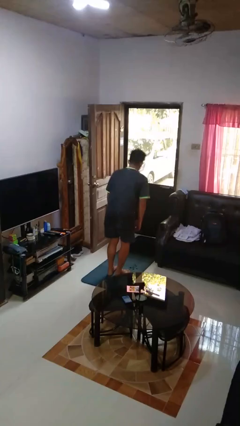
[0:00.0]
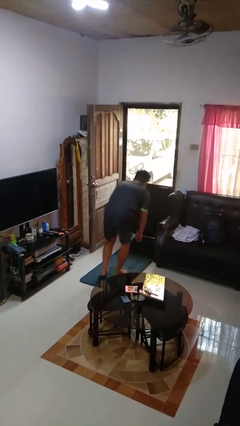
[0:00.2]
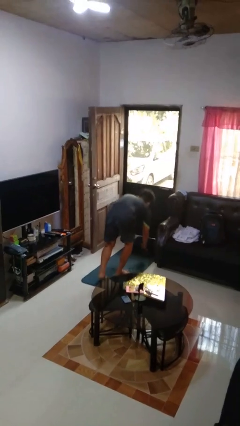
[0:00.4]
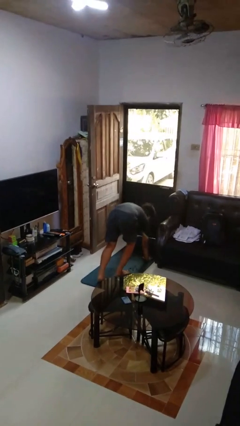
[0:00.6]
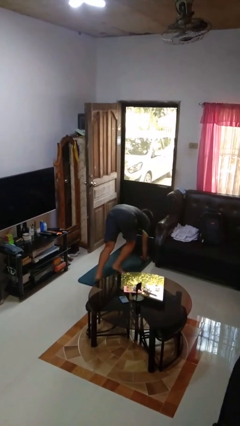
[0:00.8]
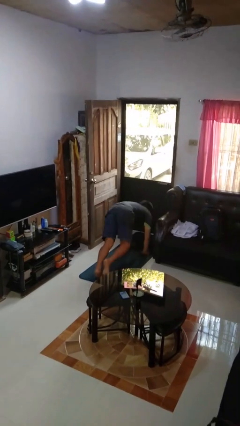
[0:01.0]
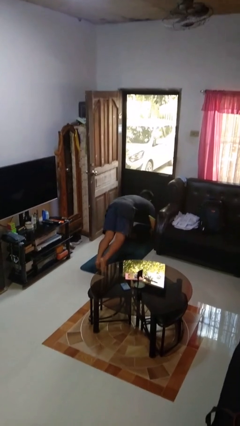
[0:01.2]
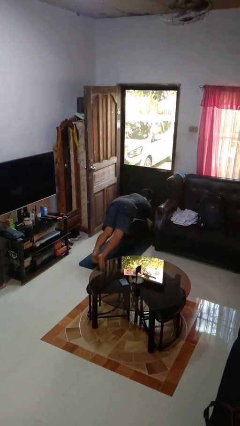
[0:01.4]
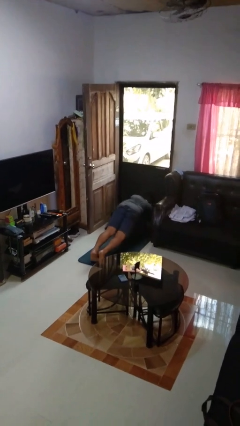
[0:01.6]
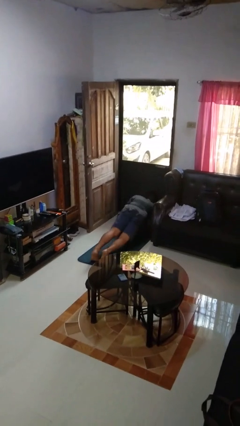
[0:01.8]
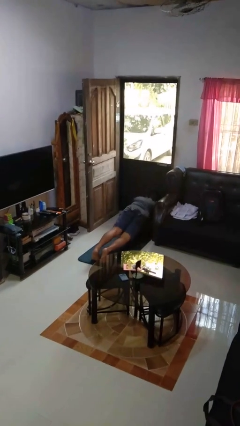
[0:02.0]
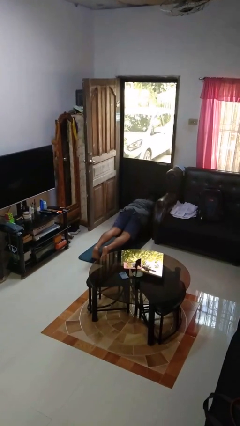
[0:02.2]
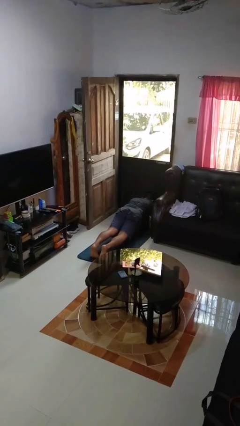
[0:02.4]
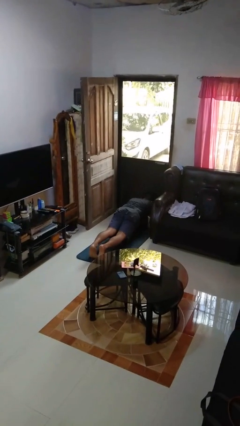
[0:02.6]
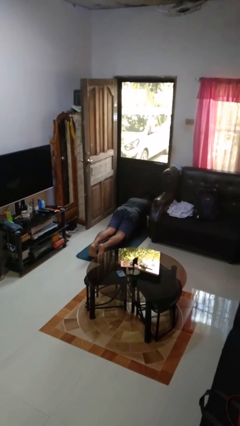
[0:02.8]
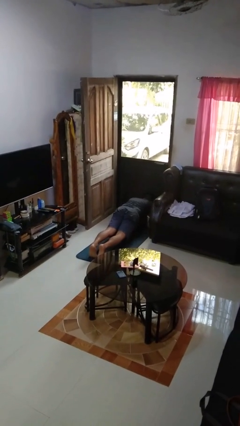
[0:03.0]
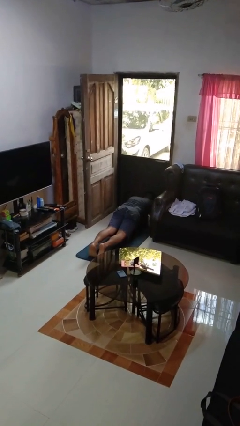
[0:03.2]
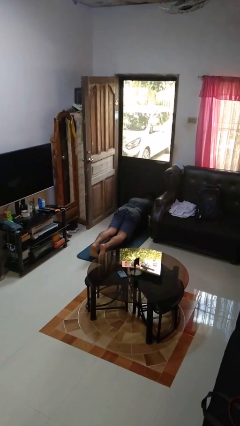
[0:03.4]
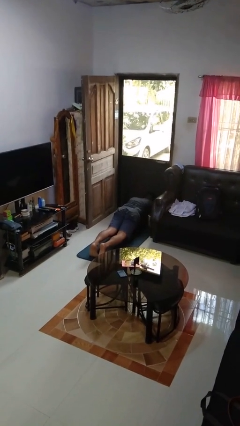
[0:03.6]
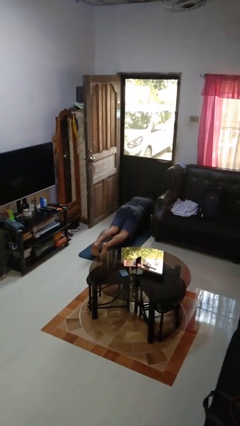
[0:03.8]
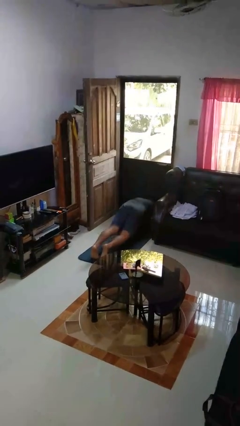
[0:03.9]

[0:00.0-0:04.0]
person exercises with plank

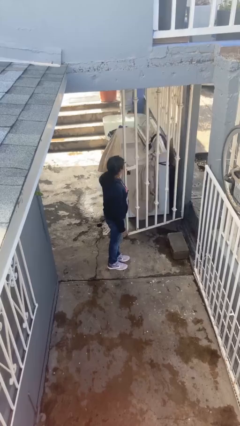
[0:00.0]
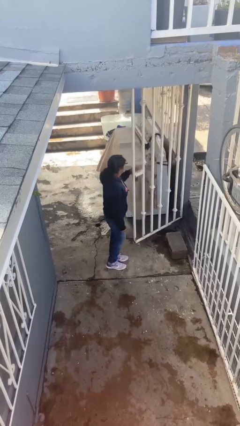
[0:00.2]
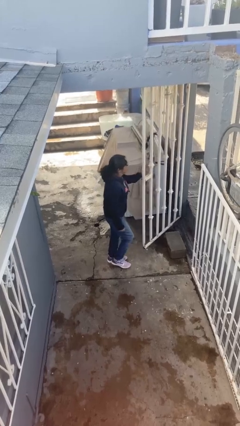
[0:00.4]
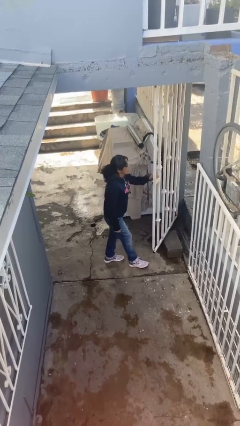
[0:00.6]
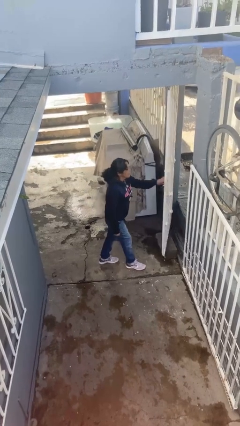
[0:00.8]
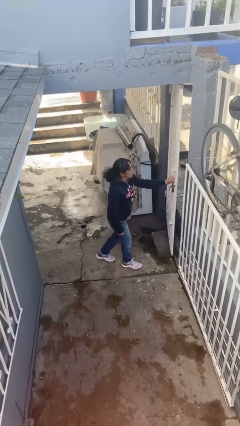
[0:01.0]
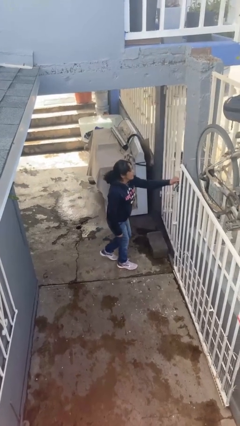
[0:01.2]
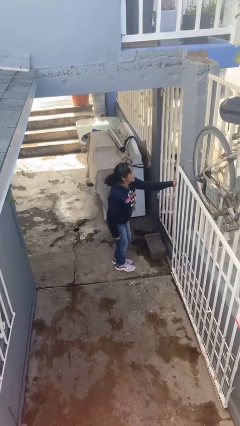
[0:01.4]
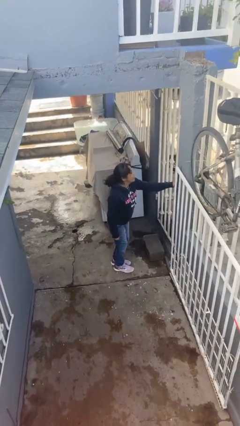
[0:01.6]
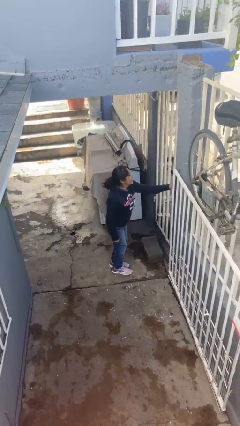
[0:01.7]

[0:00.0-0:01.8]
person closes facility door

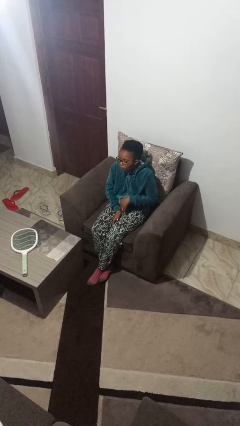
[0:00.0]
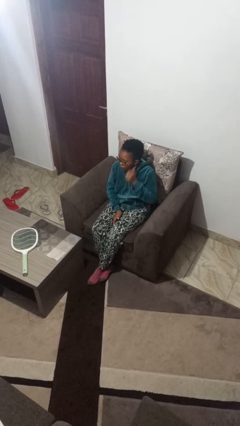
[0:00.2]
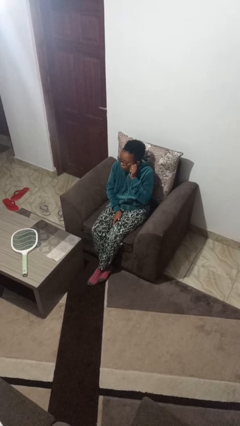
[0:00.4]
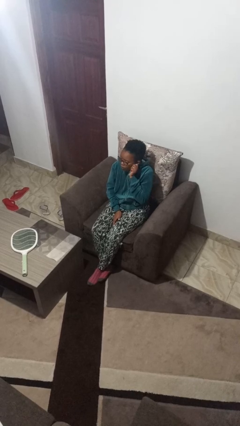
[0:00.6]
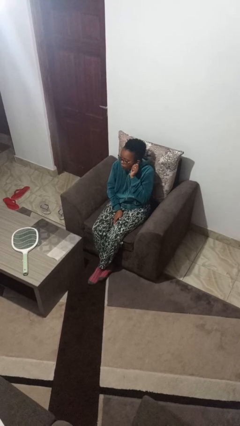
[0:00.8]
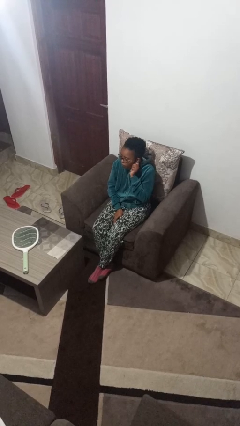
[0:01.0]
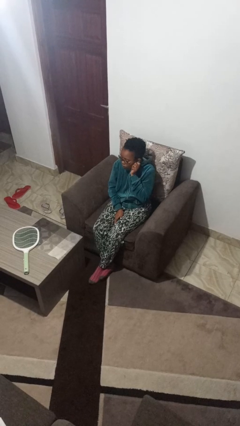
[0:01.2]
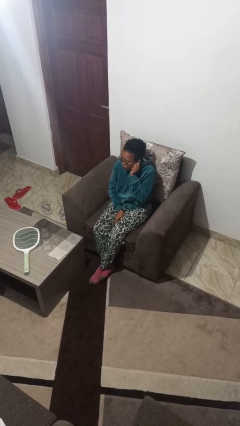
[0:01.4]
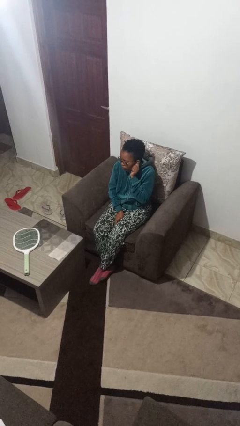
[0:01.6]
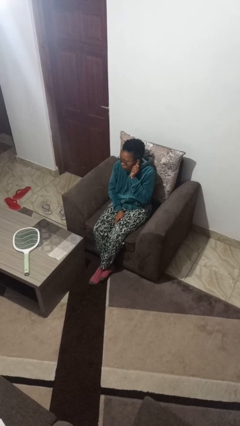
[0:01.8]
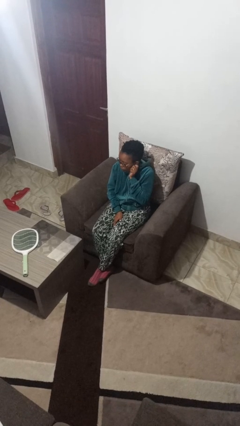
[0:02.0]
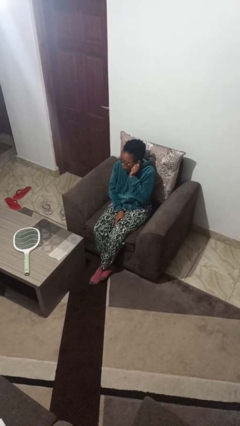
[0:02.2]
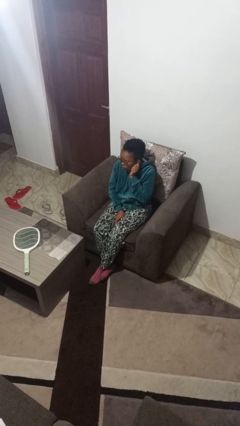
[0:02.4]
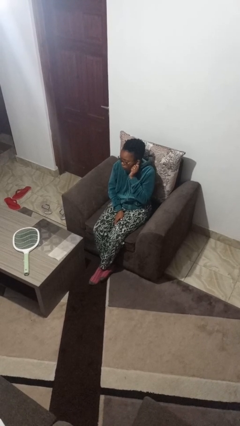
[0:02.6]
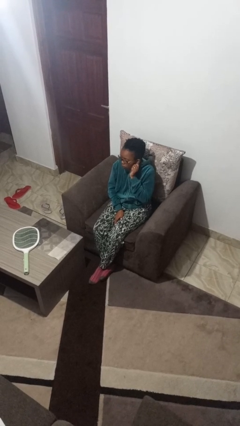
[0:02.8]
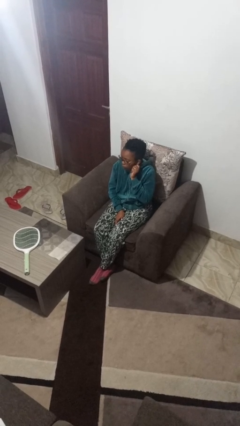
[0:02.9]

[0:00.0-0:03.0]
person touches earlobe

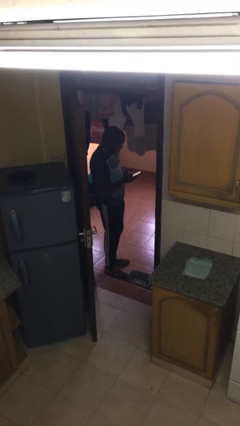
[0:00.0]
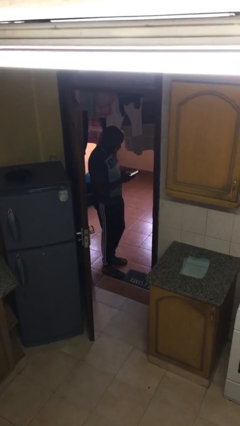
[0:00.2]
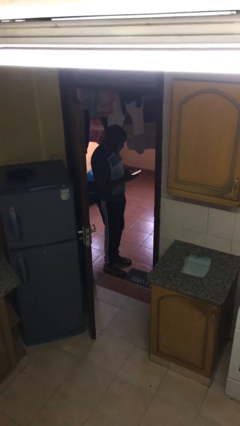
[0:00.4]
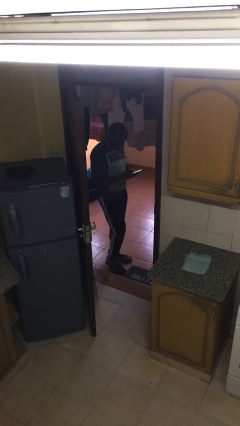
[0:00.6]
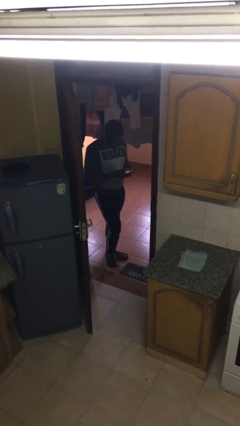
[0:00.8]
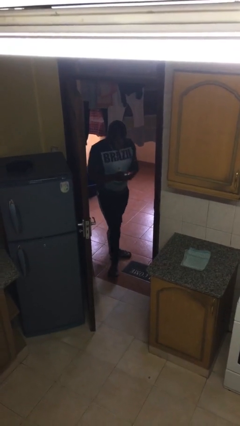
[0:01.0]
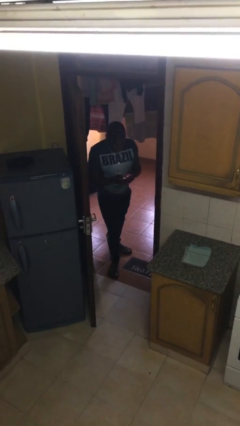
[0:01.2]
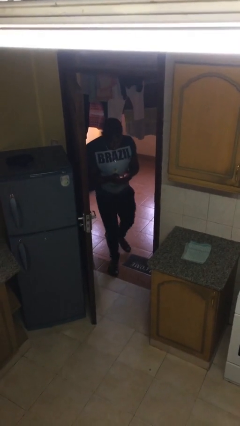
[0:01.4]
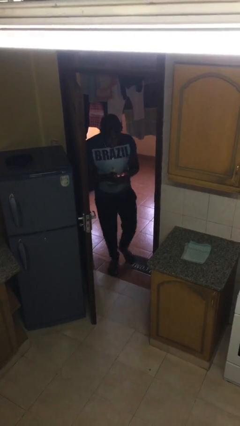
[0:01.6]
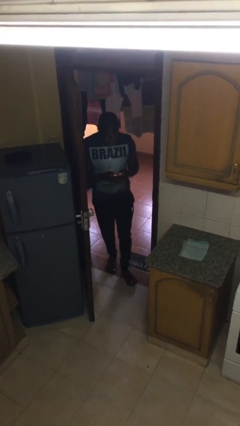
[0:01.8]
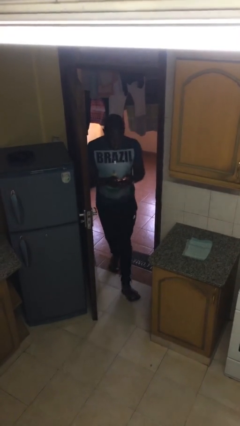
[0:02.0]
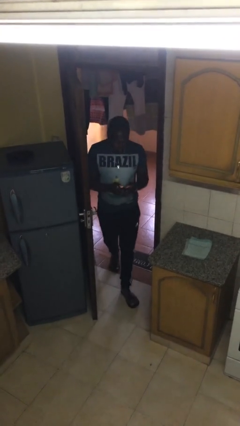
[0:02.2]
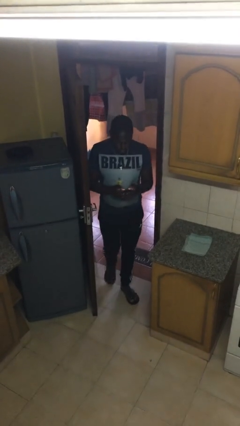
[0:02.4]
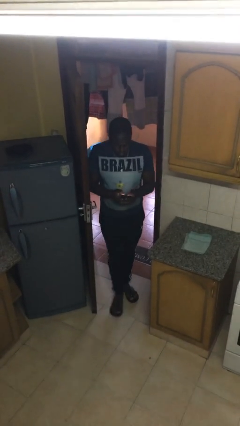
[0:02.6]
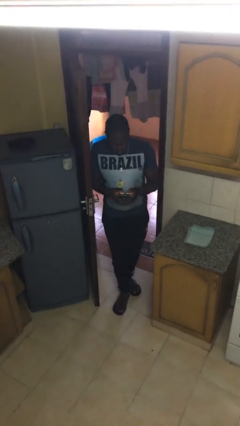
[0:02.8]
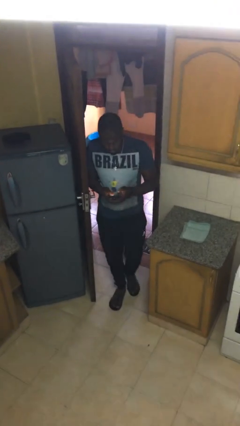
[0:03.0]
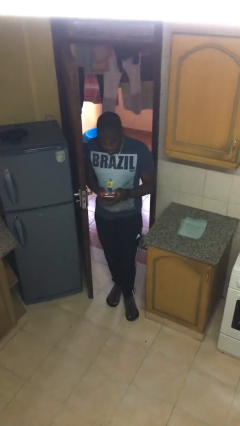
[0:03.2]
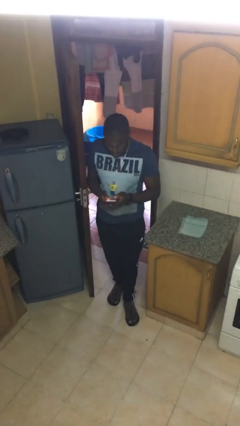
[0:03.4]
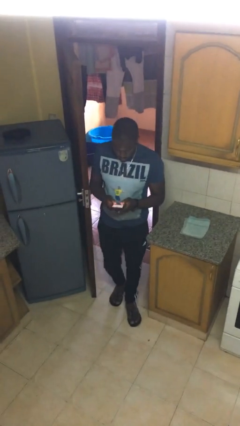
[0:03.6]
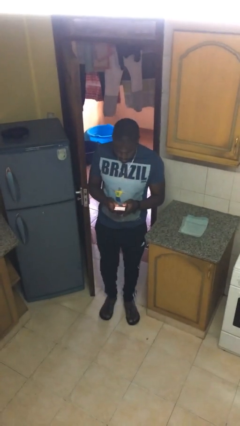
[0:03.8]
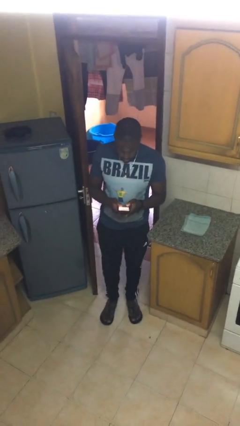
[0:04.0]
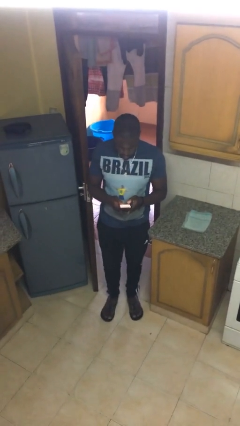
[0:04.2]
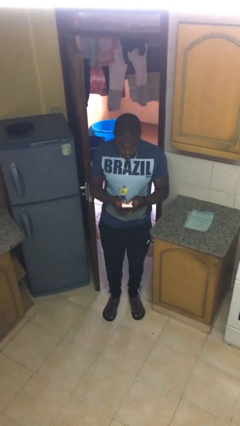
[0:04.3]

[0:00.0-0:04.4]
person enters scene through structure

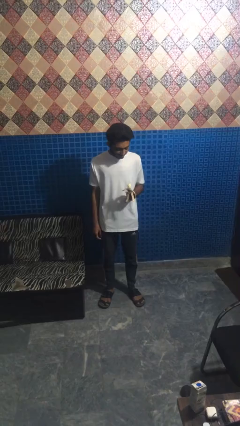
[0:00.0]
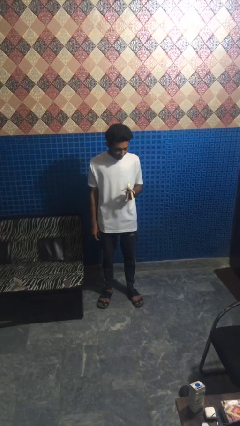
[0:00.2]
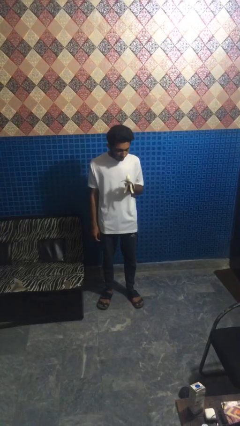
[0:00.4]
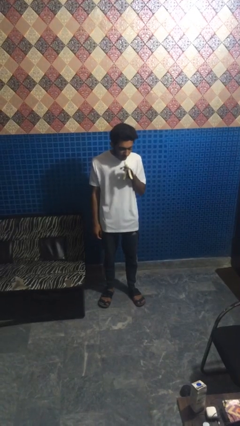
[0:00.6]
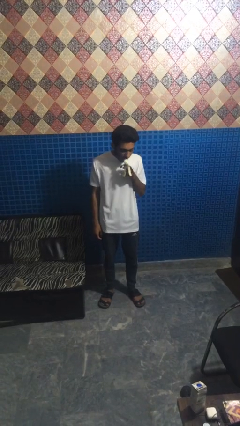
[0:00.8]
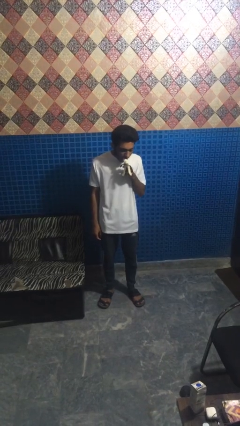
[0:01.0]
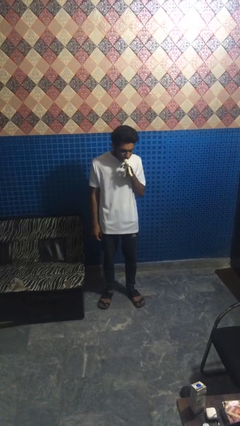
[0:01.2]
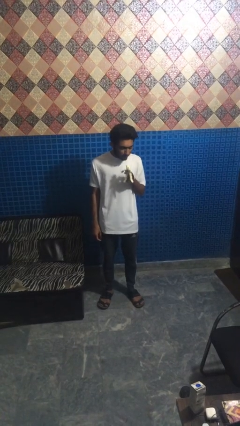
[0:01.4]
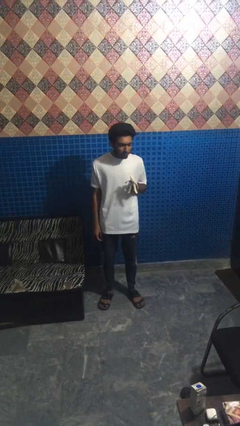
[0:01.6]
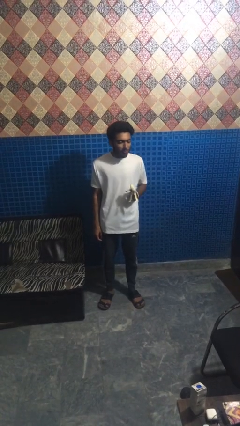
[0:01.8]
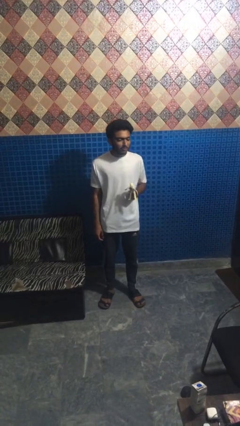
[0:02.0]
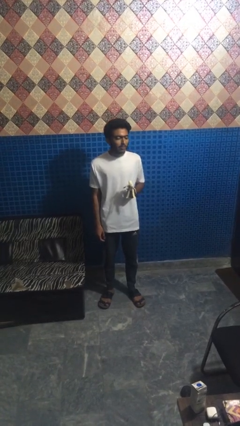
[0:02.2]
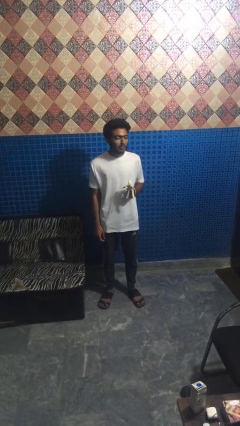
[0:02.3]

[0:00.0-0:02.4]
person eats banana

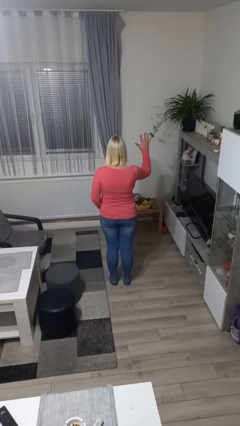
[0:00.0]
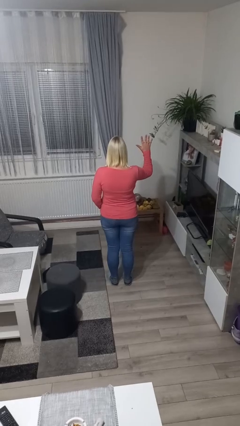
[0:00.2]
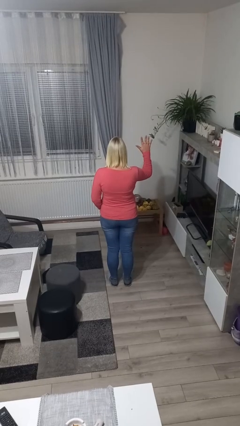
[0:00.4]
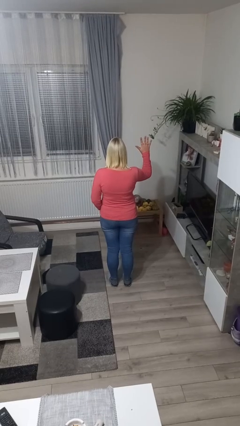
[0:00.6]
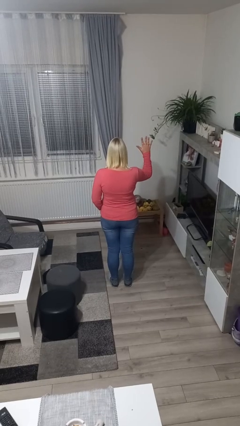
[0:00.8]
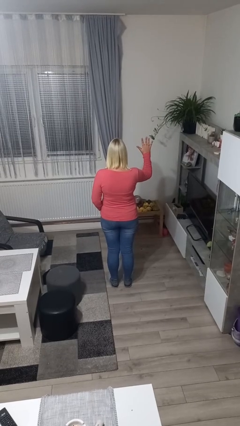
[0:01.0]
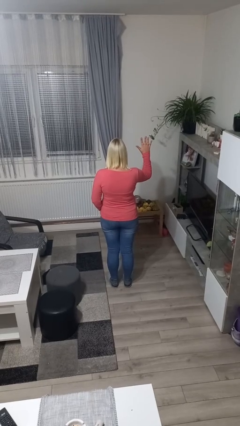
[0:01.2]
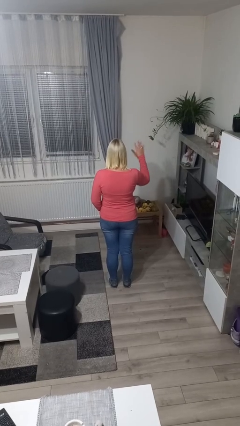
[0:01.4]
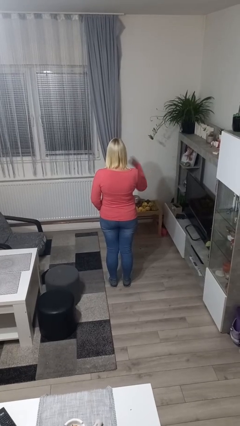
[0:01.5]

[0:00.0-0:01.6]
person gestures number five

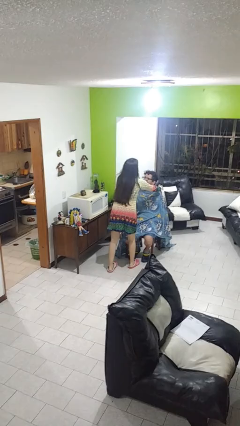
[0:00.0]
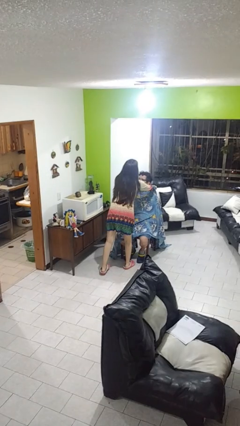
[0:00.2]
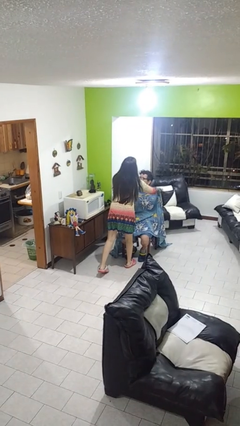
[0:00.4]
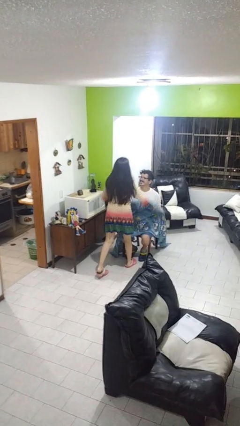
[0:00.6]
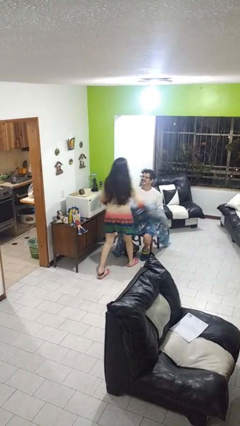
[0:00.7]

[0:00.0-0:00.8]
person uncovers friend with blanket
